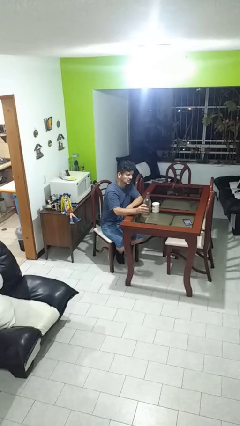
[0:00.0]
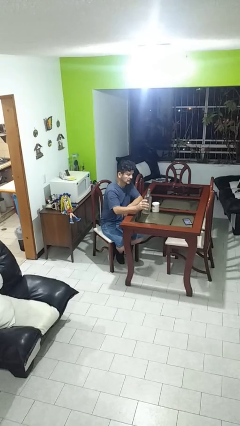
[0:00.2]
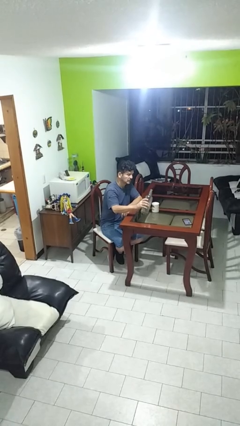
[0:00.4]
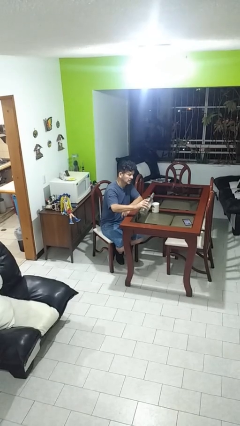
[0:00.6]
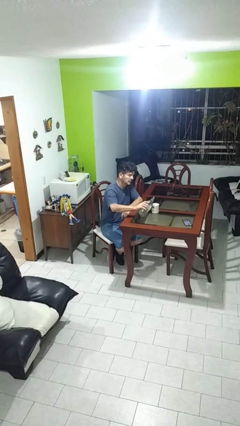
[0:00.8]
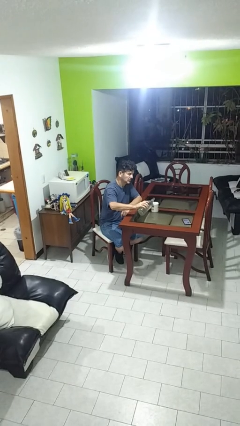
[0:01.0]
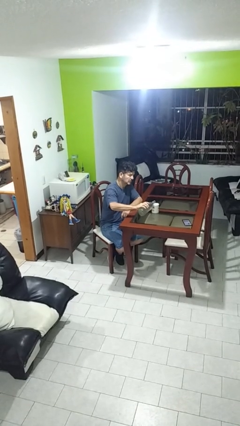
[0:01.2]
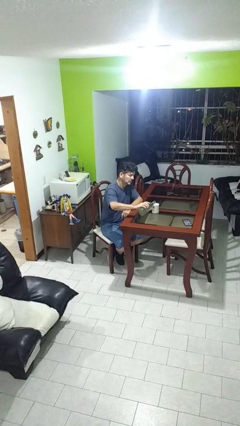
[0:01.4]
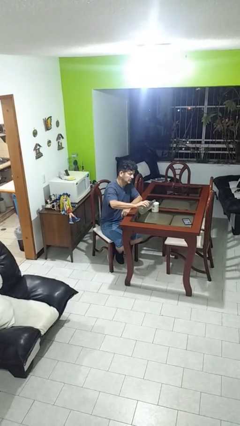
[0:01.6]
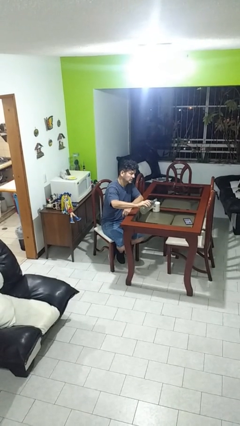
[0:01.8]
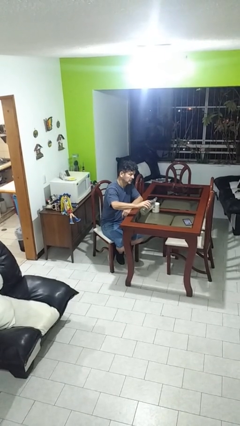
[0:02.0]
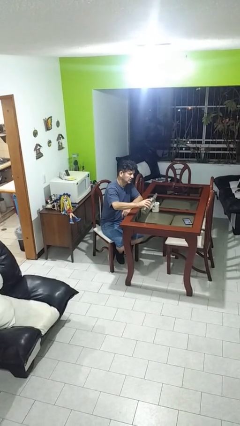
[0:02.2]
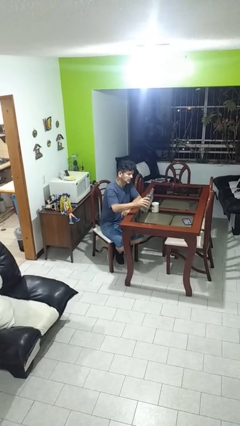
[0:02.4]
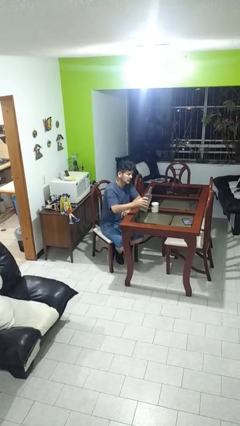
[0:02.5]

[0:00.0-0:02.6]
person pours liquid into cup

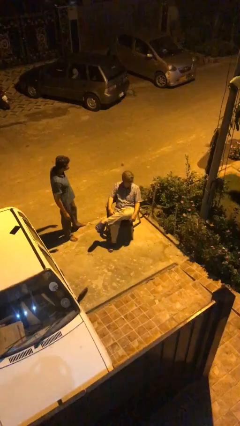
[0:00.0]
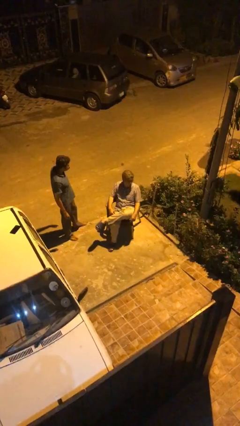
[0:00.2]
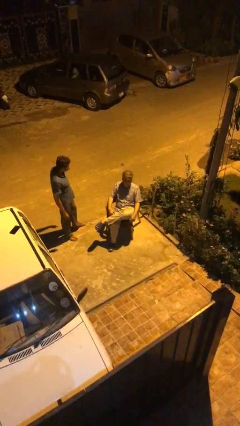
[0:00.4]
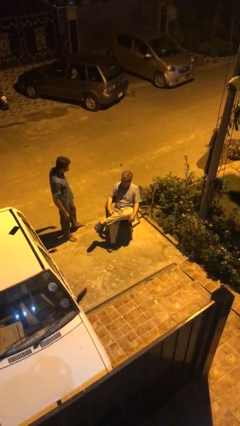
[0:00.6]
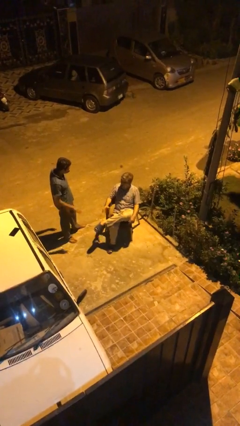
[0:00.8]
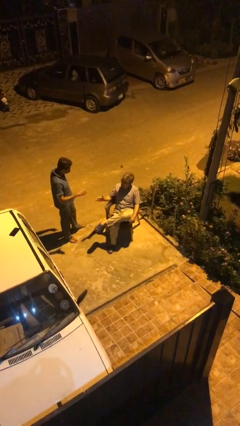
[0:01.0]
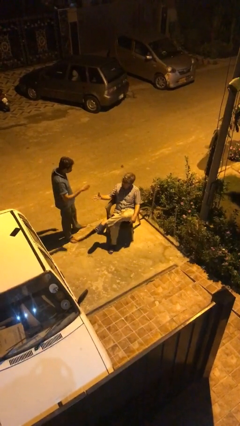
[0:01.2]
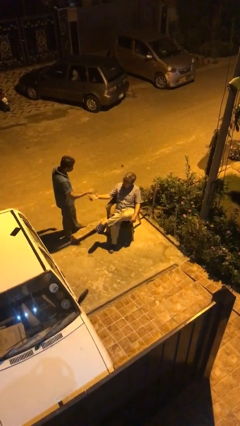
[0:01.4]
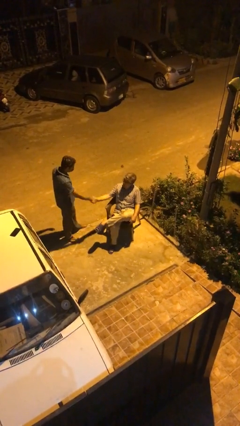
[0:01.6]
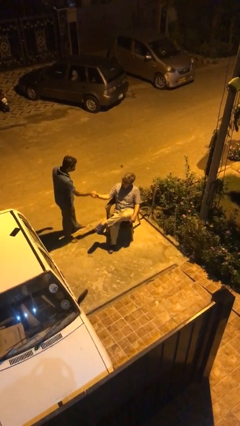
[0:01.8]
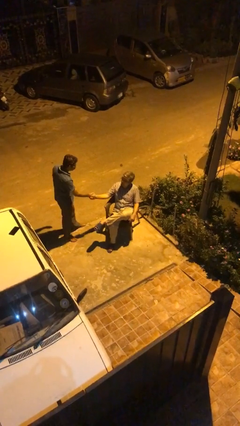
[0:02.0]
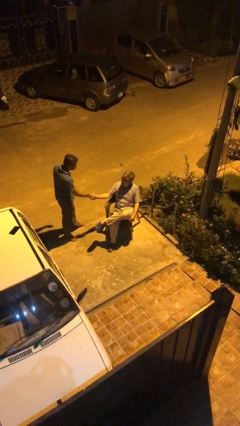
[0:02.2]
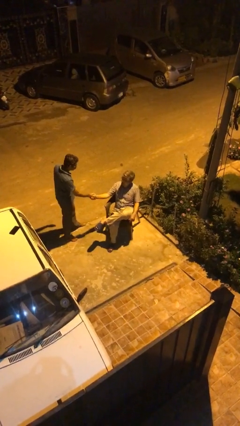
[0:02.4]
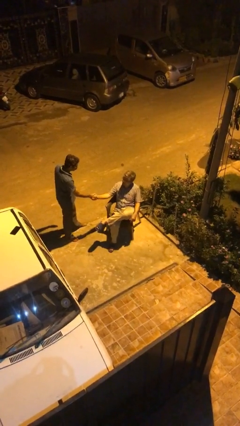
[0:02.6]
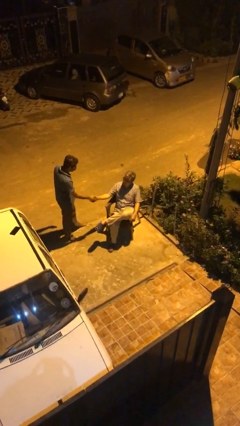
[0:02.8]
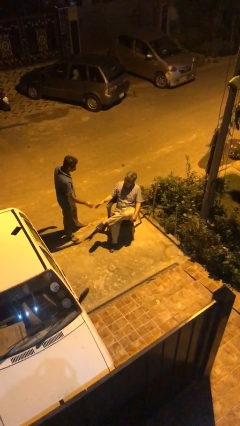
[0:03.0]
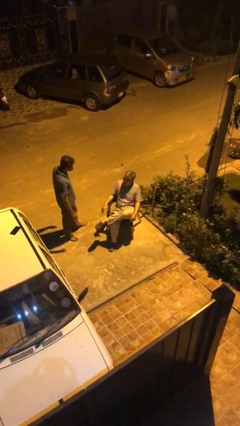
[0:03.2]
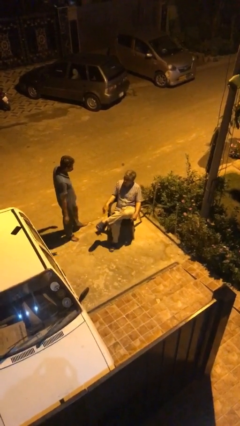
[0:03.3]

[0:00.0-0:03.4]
person shakes hand

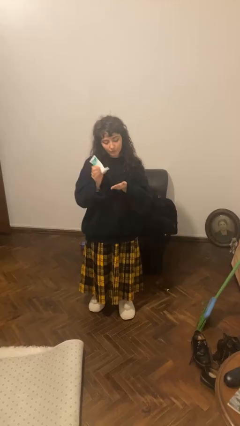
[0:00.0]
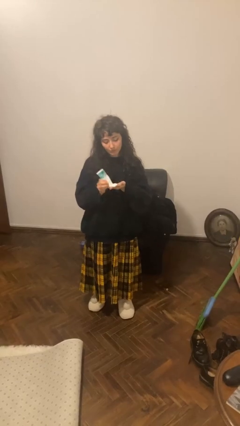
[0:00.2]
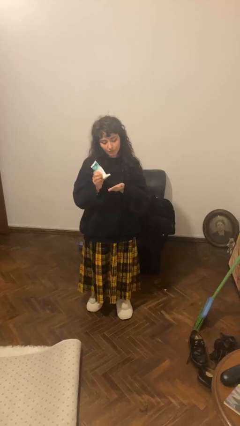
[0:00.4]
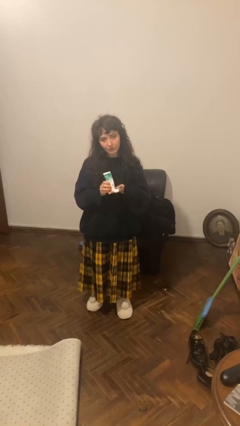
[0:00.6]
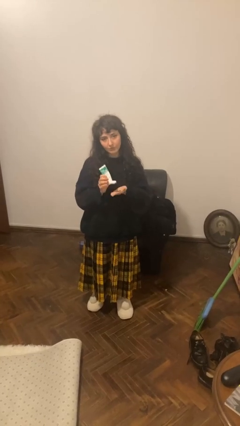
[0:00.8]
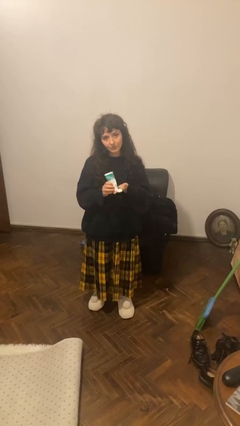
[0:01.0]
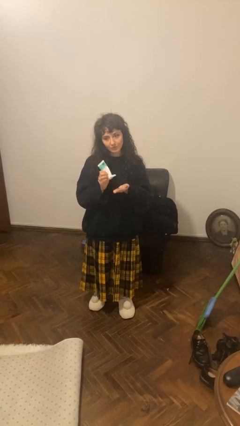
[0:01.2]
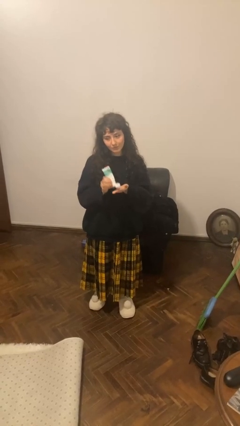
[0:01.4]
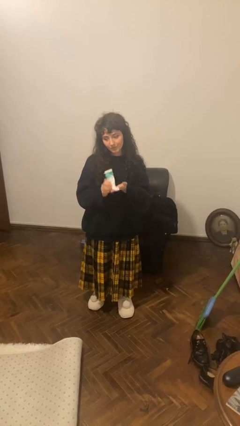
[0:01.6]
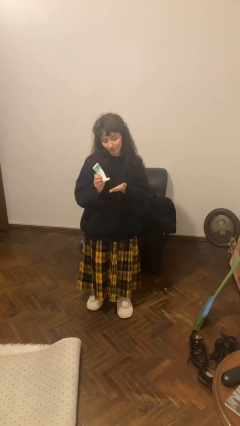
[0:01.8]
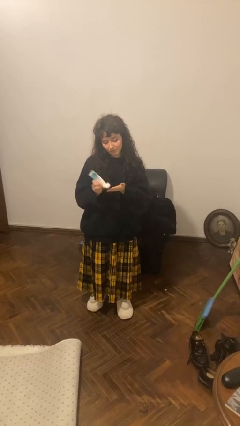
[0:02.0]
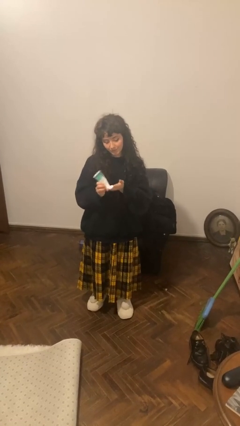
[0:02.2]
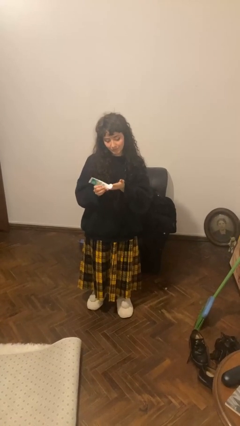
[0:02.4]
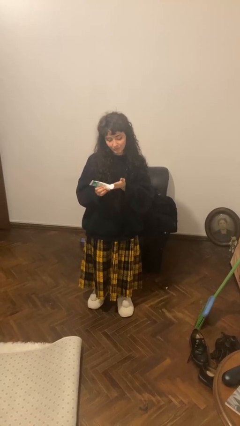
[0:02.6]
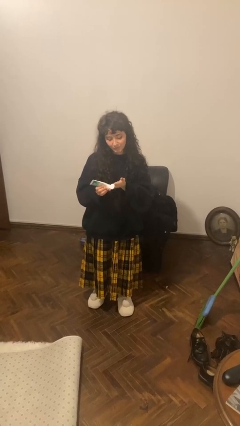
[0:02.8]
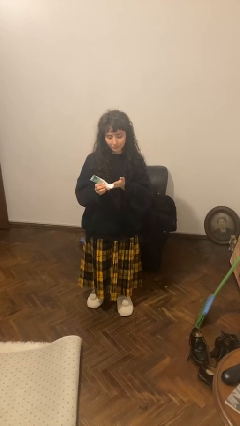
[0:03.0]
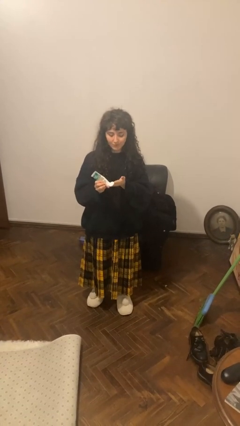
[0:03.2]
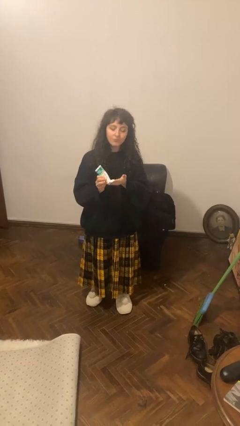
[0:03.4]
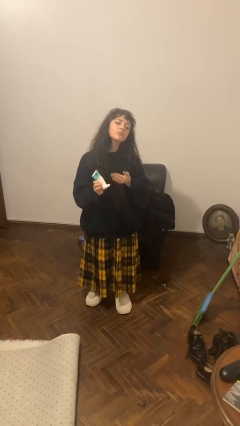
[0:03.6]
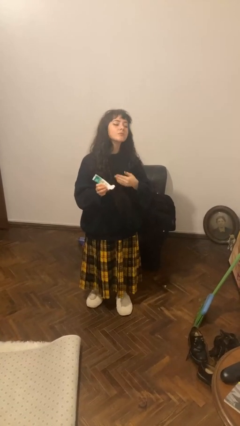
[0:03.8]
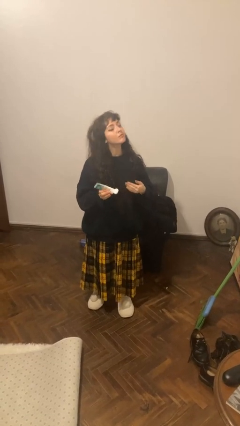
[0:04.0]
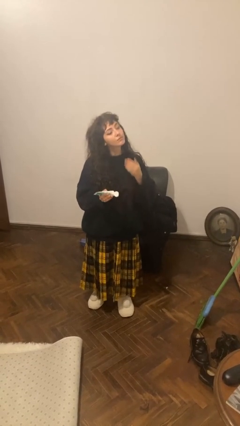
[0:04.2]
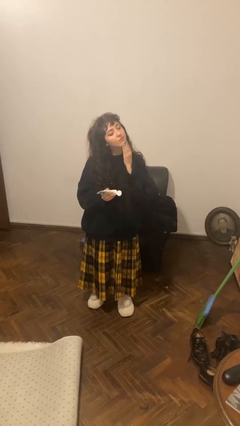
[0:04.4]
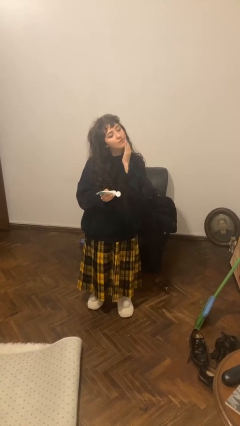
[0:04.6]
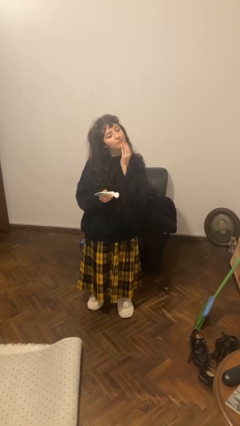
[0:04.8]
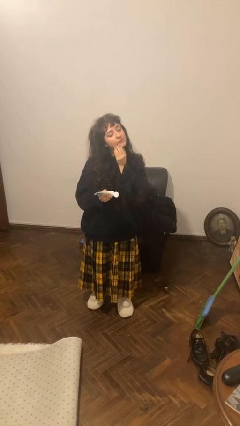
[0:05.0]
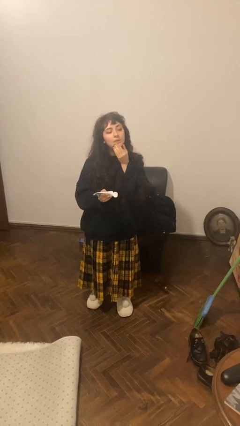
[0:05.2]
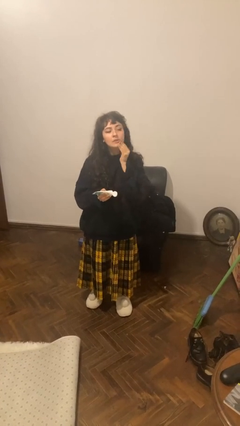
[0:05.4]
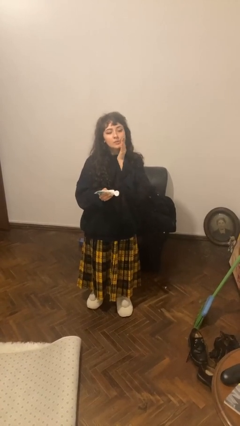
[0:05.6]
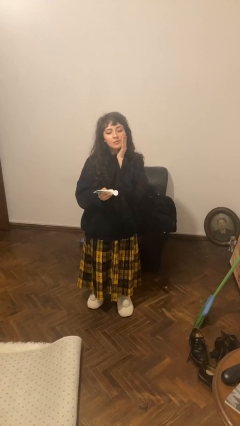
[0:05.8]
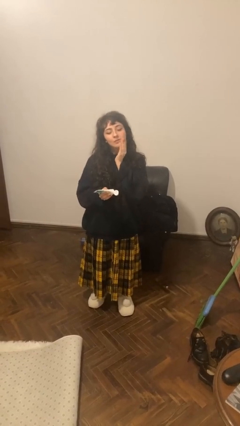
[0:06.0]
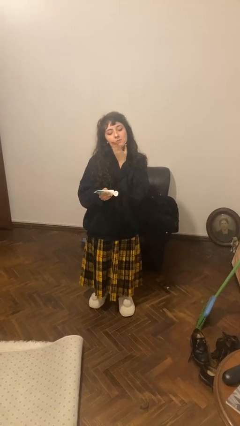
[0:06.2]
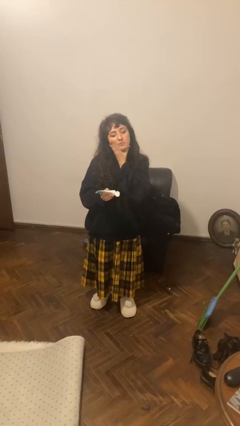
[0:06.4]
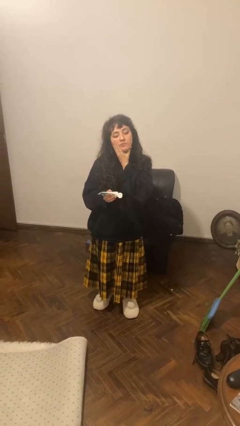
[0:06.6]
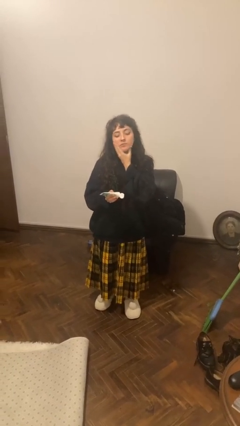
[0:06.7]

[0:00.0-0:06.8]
person applies facial moisturizer

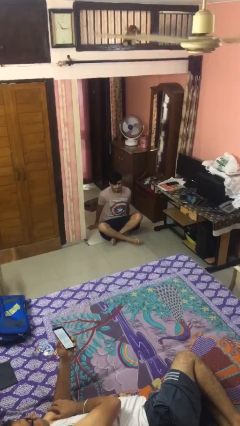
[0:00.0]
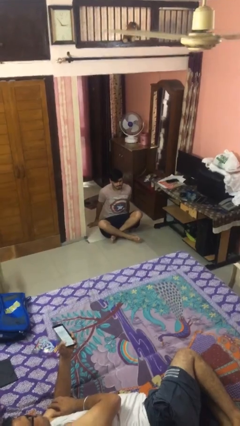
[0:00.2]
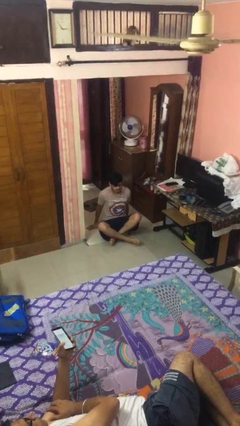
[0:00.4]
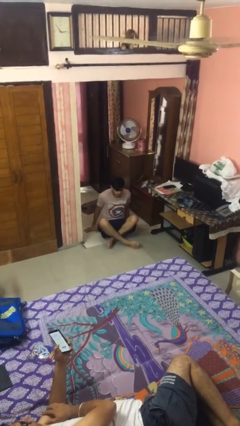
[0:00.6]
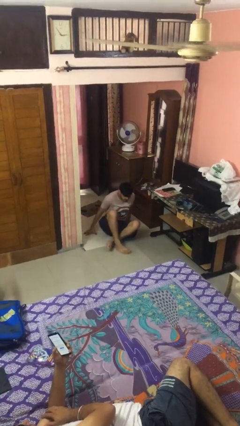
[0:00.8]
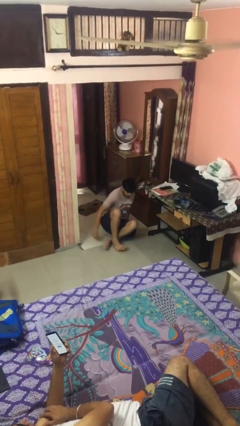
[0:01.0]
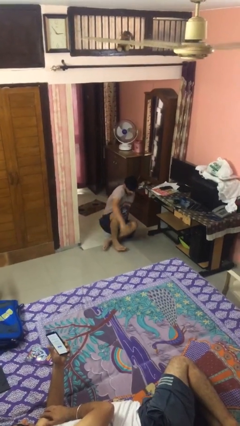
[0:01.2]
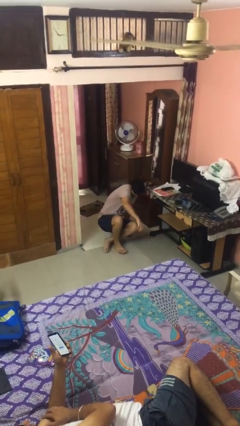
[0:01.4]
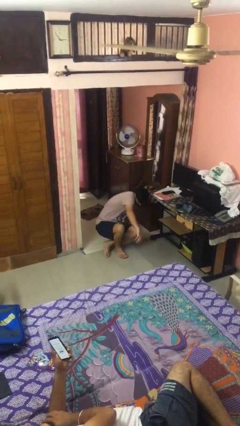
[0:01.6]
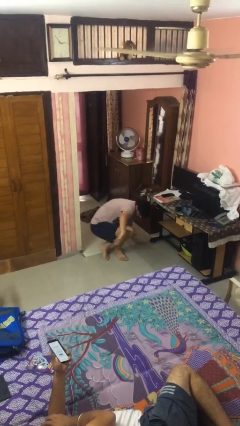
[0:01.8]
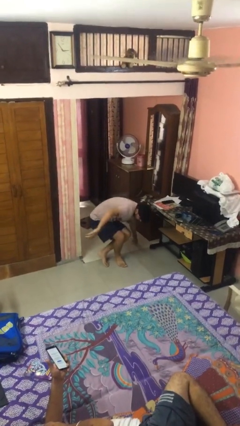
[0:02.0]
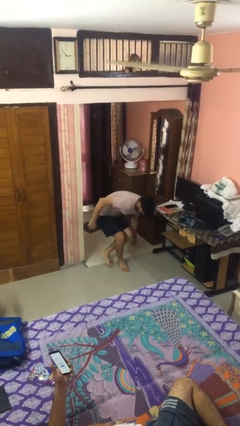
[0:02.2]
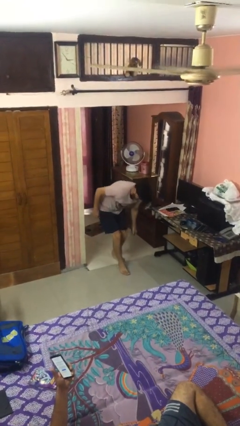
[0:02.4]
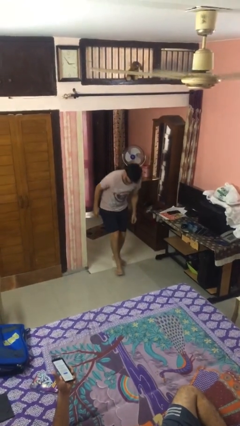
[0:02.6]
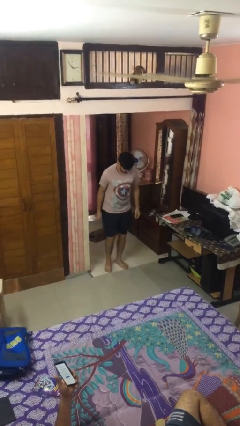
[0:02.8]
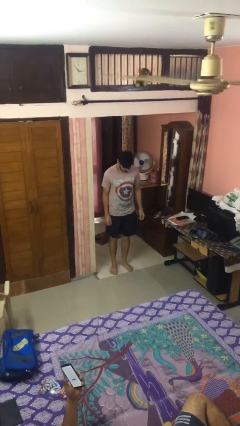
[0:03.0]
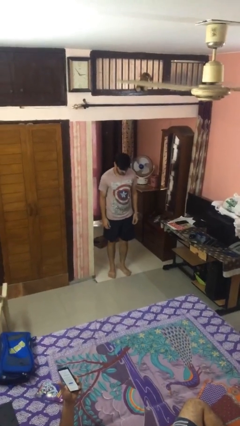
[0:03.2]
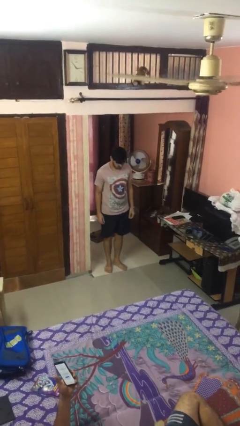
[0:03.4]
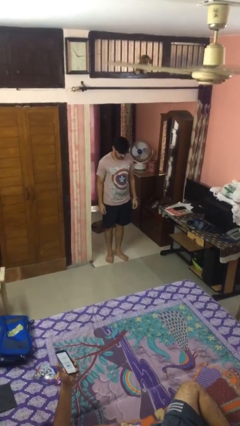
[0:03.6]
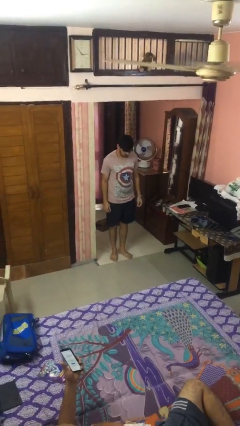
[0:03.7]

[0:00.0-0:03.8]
person stands up from floor

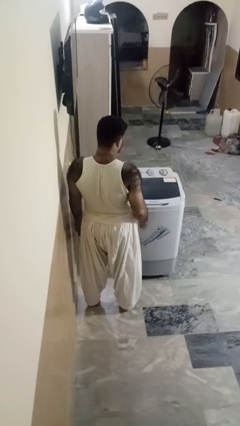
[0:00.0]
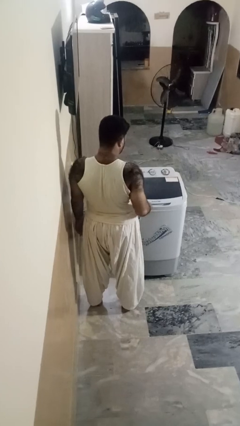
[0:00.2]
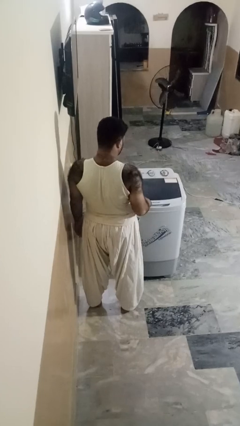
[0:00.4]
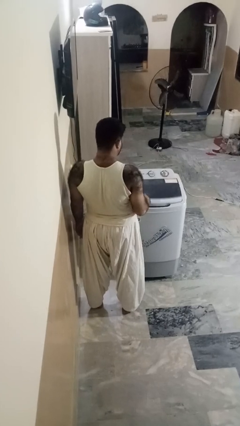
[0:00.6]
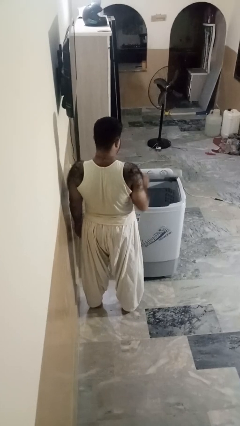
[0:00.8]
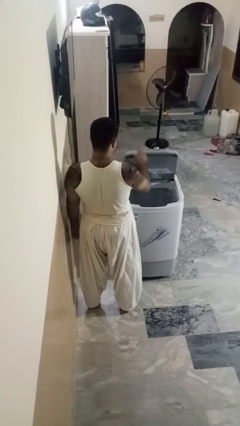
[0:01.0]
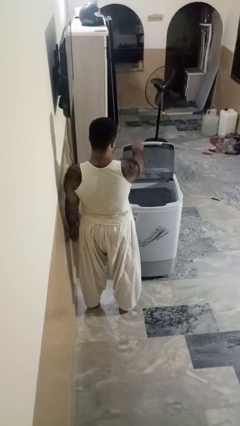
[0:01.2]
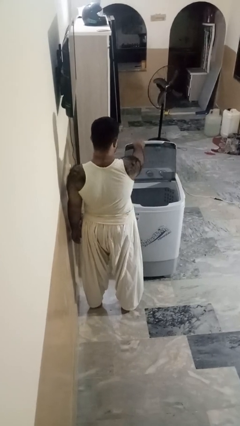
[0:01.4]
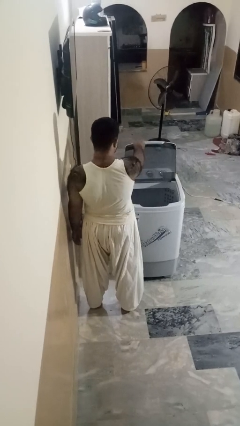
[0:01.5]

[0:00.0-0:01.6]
person opens clothes washer
